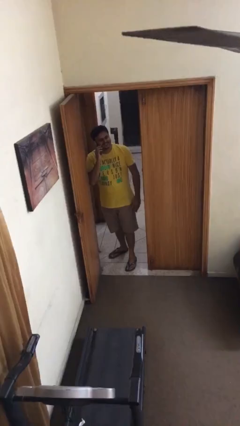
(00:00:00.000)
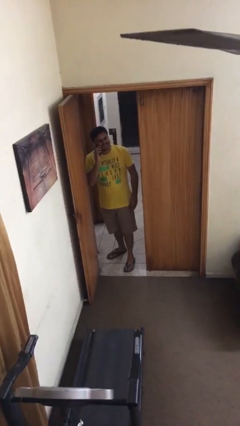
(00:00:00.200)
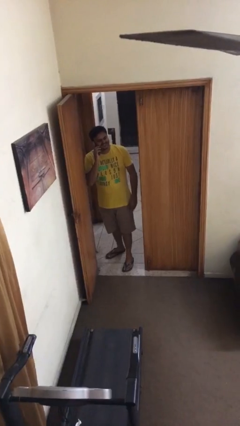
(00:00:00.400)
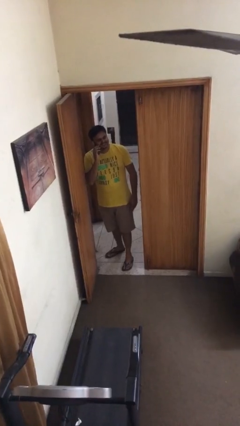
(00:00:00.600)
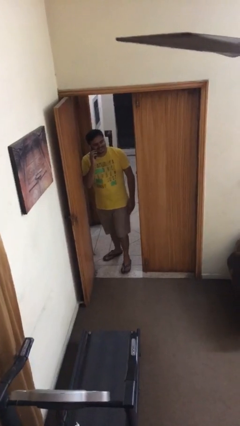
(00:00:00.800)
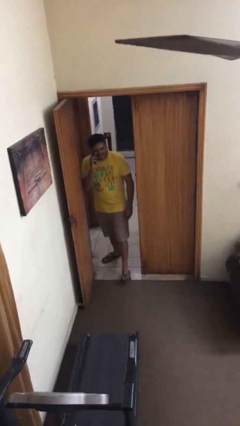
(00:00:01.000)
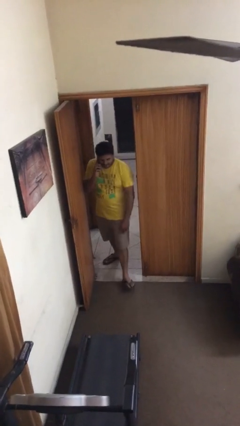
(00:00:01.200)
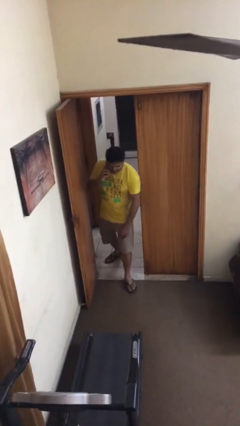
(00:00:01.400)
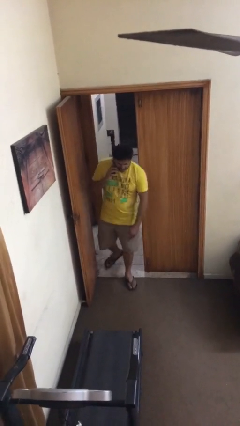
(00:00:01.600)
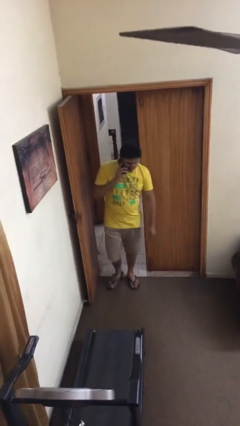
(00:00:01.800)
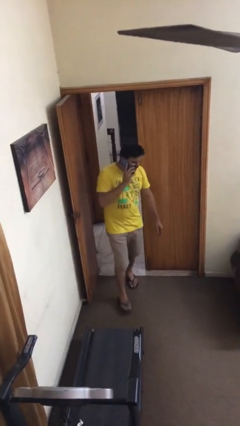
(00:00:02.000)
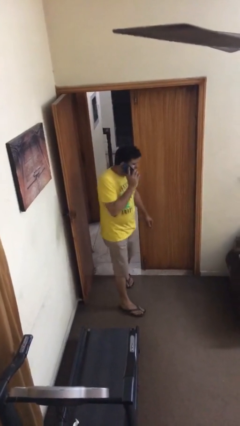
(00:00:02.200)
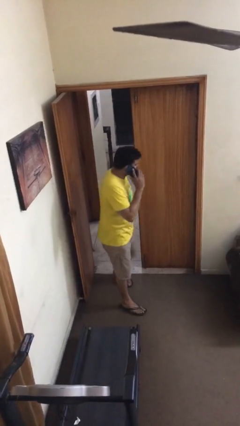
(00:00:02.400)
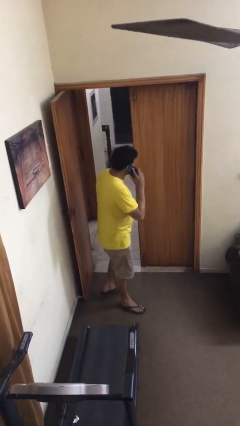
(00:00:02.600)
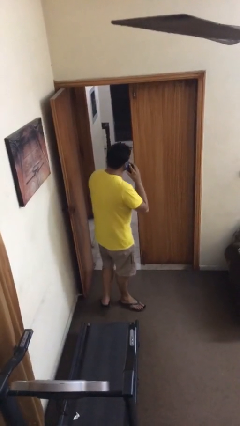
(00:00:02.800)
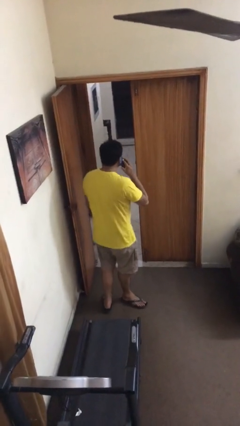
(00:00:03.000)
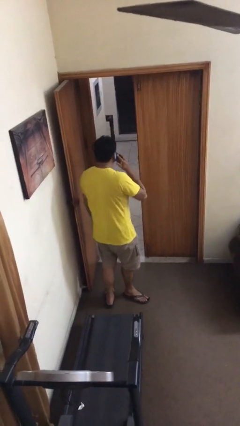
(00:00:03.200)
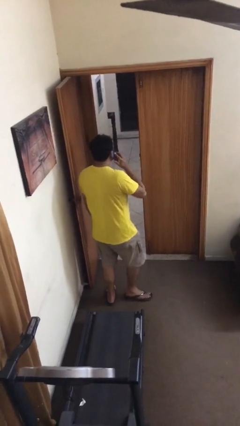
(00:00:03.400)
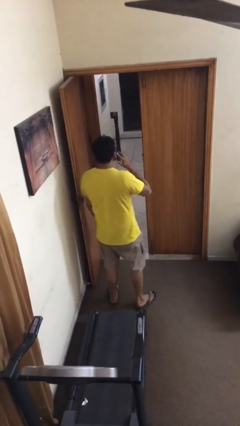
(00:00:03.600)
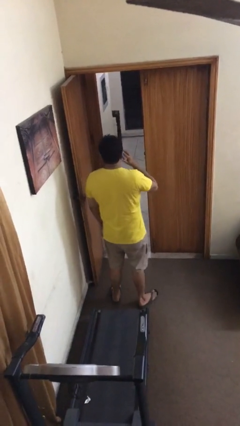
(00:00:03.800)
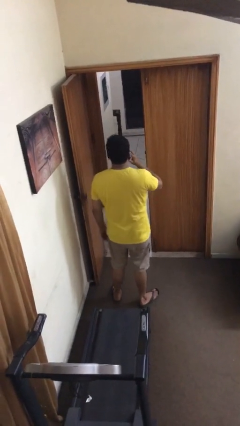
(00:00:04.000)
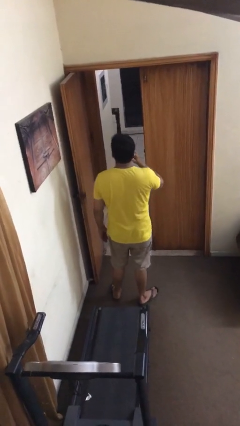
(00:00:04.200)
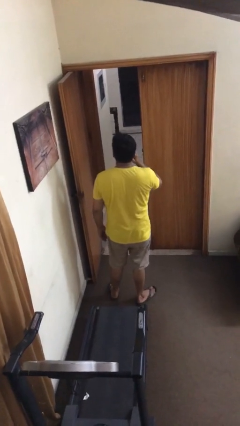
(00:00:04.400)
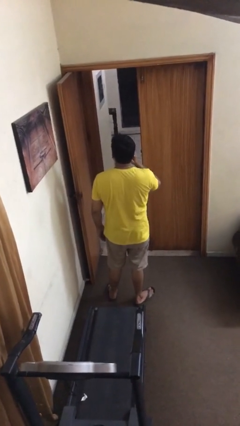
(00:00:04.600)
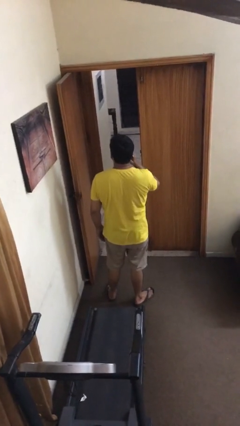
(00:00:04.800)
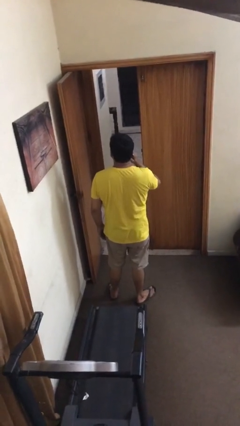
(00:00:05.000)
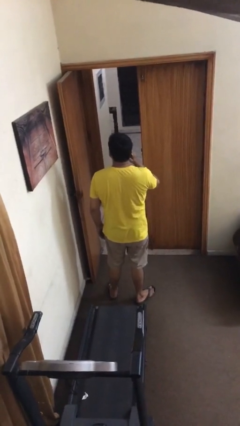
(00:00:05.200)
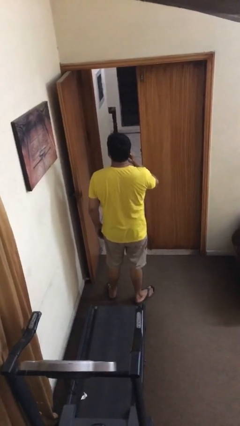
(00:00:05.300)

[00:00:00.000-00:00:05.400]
person enters scene through structure

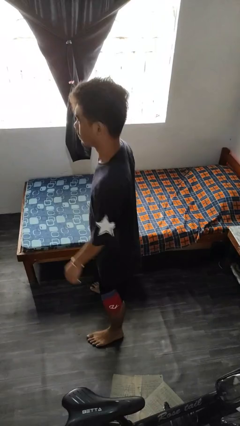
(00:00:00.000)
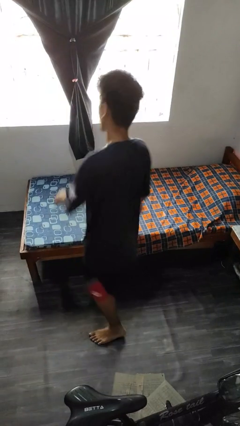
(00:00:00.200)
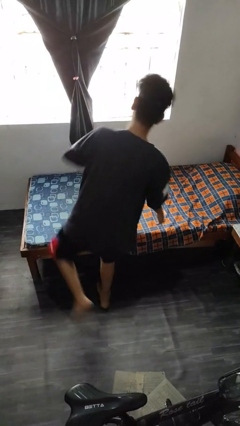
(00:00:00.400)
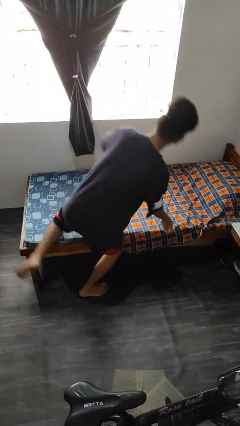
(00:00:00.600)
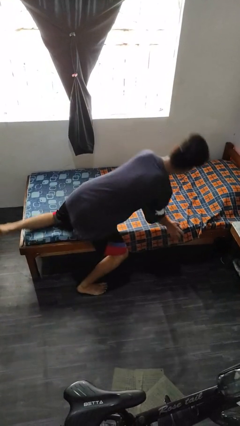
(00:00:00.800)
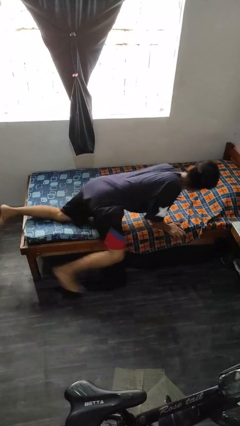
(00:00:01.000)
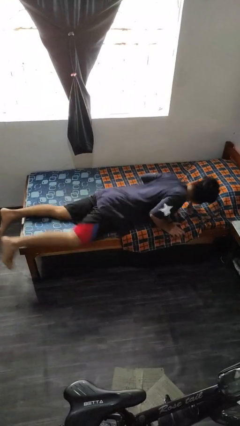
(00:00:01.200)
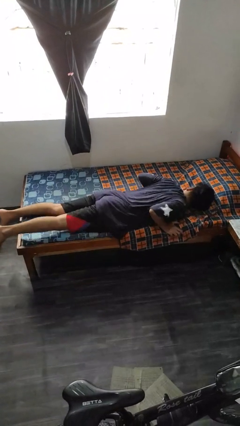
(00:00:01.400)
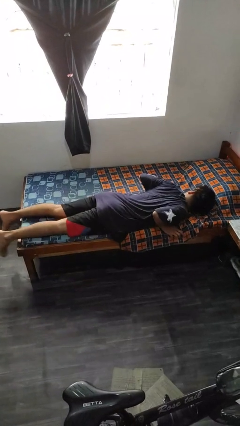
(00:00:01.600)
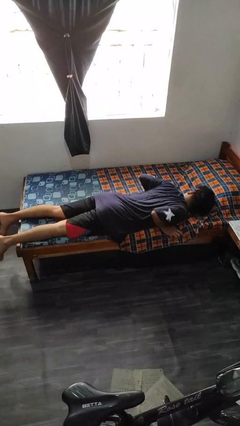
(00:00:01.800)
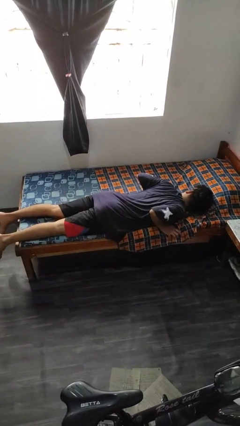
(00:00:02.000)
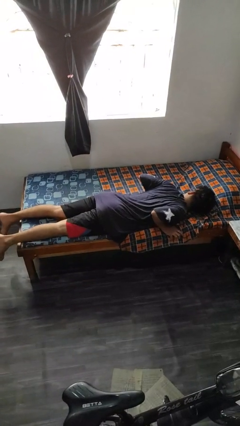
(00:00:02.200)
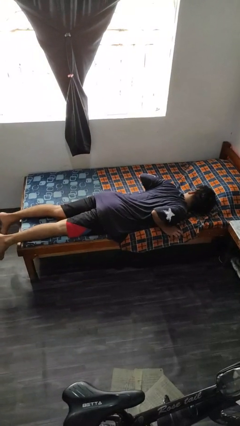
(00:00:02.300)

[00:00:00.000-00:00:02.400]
person lies down on bed

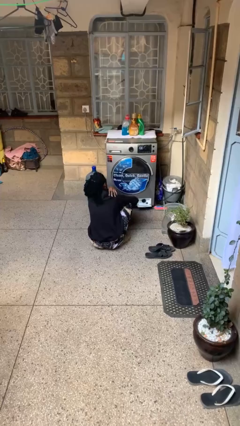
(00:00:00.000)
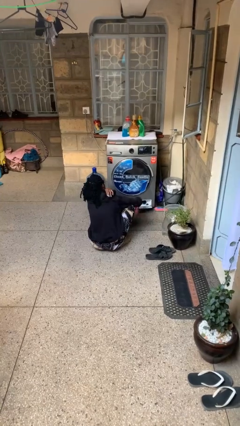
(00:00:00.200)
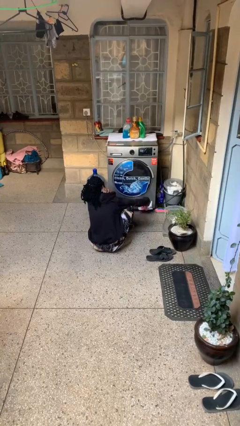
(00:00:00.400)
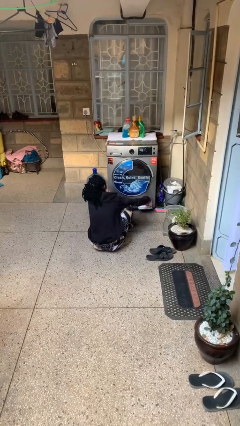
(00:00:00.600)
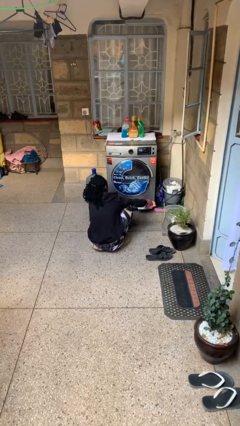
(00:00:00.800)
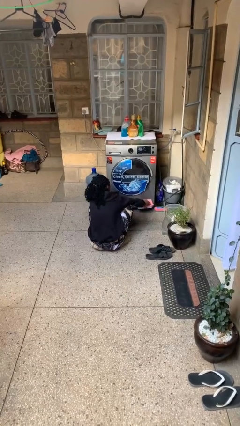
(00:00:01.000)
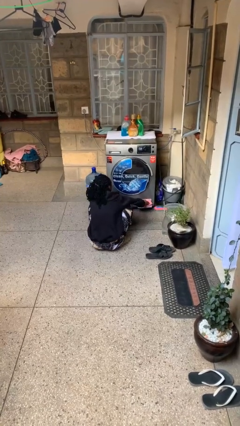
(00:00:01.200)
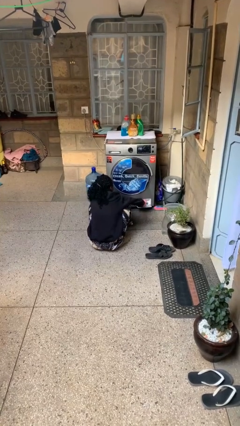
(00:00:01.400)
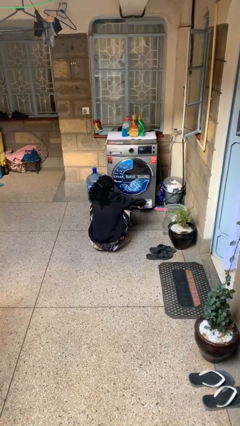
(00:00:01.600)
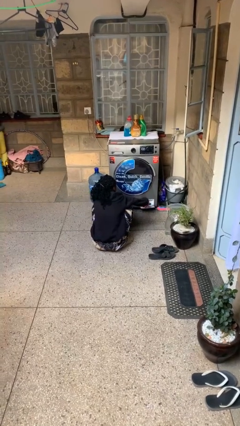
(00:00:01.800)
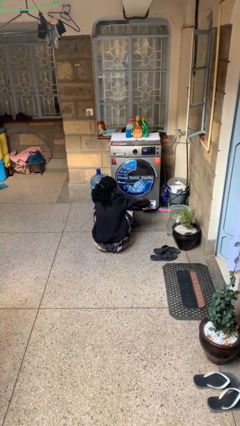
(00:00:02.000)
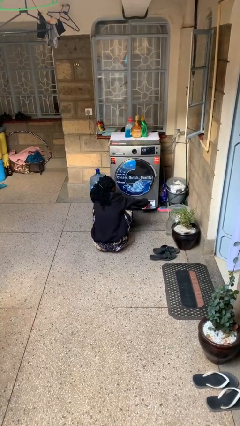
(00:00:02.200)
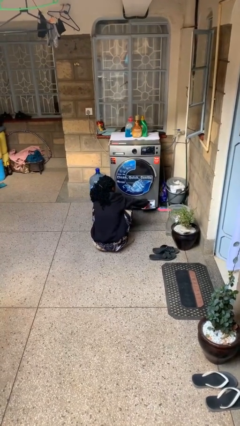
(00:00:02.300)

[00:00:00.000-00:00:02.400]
person cleans dryer lint trap

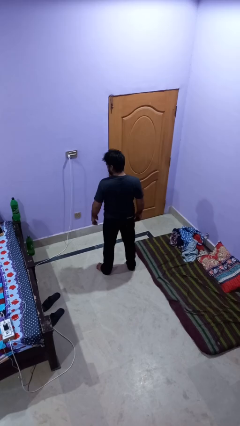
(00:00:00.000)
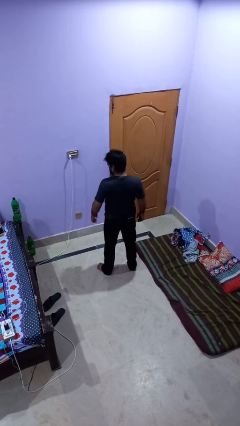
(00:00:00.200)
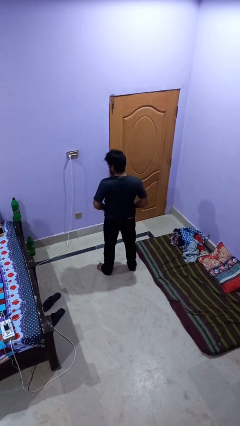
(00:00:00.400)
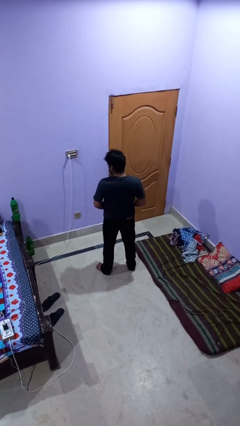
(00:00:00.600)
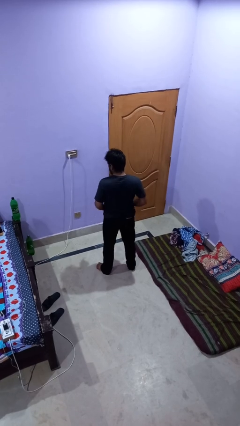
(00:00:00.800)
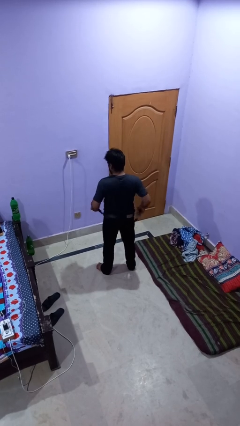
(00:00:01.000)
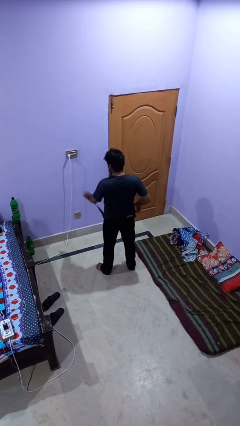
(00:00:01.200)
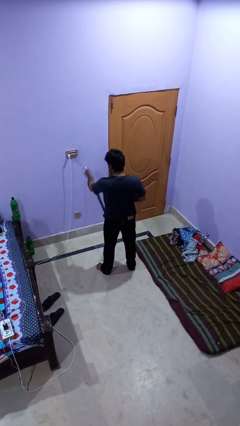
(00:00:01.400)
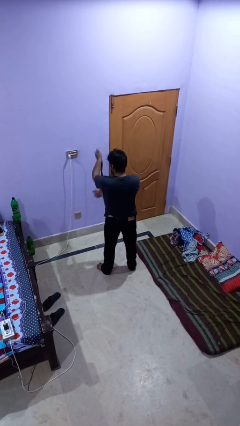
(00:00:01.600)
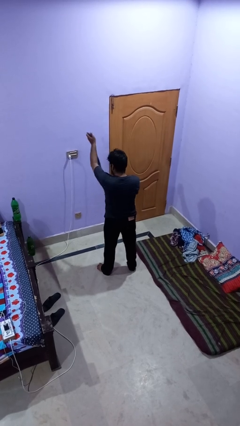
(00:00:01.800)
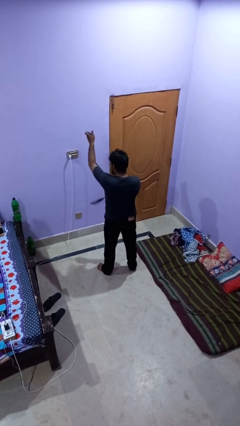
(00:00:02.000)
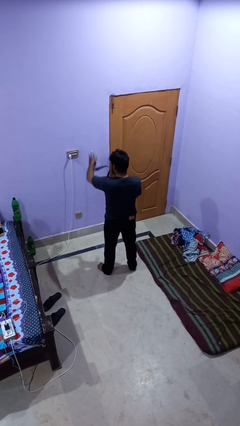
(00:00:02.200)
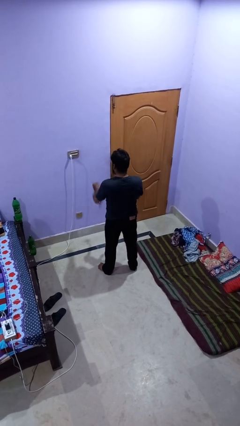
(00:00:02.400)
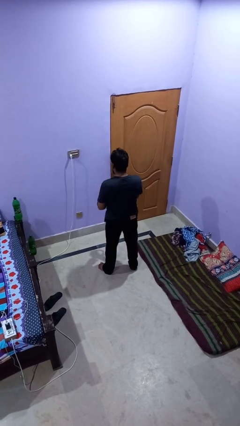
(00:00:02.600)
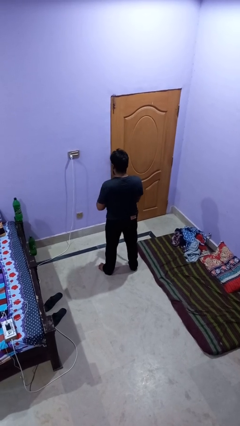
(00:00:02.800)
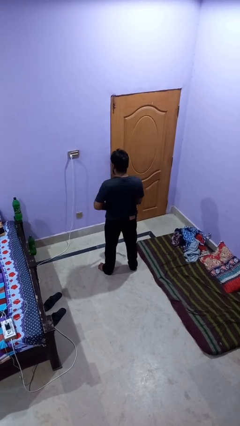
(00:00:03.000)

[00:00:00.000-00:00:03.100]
person takes off belt

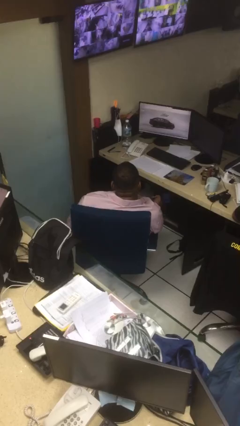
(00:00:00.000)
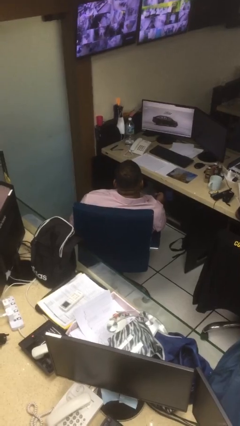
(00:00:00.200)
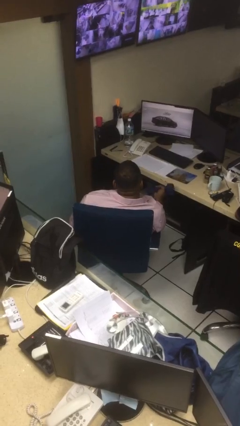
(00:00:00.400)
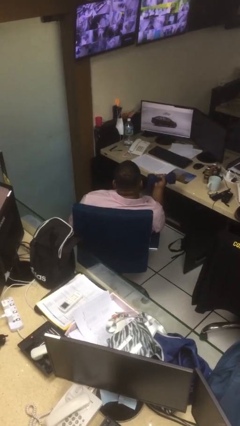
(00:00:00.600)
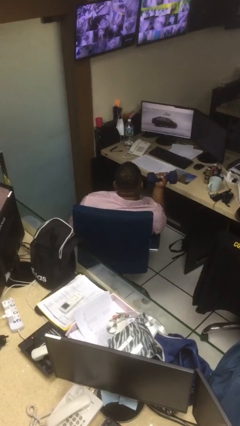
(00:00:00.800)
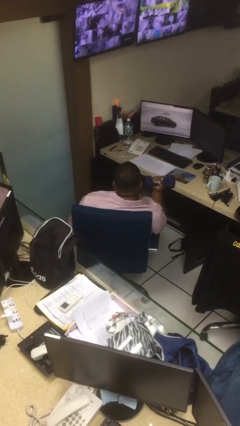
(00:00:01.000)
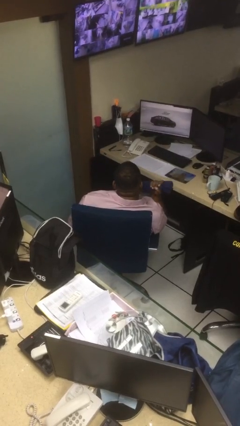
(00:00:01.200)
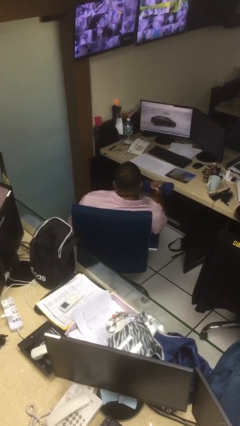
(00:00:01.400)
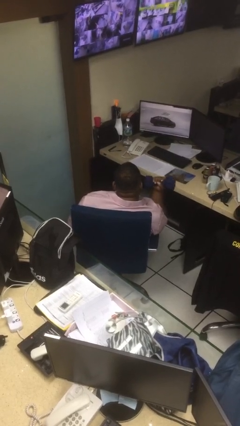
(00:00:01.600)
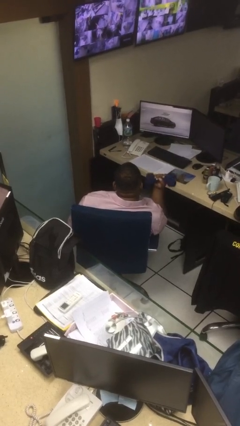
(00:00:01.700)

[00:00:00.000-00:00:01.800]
person lifts dumbbells

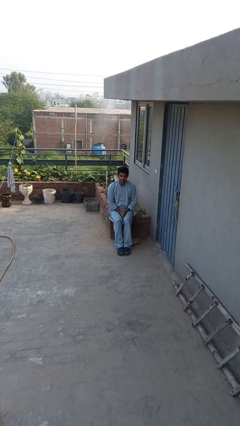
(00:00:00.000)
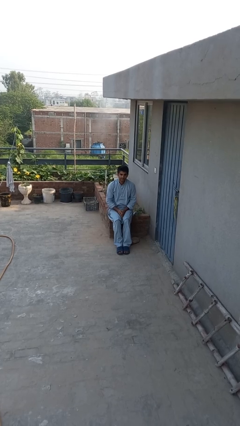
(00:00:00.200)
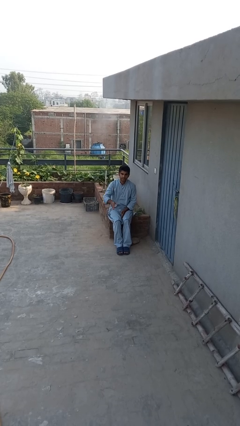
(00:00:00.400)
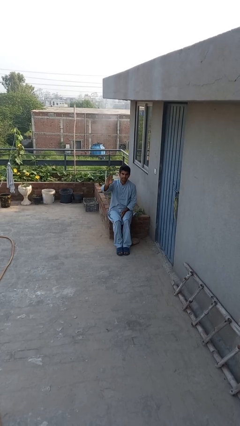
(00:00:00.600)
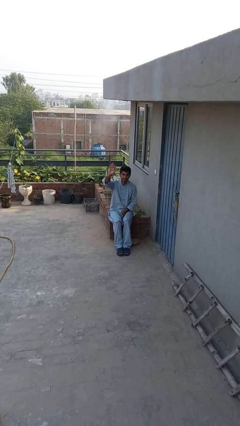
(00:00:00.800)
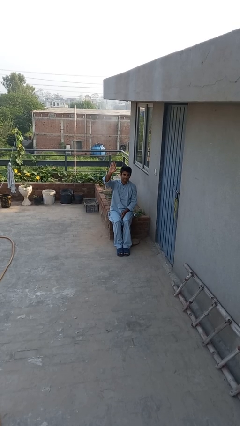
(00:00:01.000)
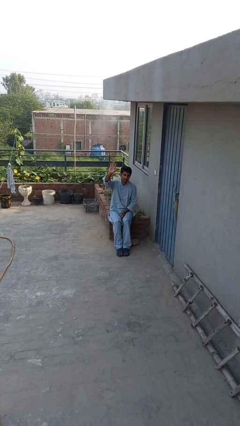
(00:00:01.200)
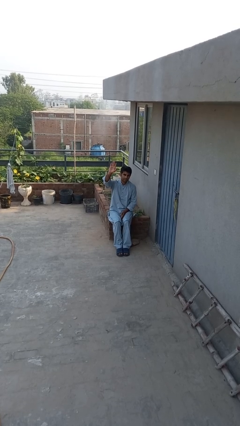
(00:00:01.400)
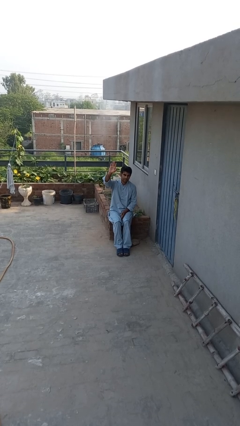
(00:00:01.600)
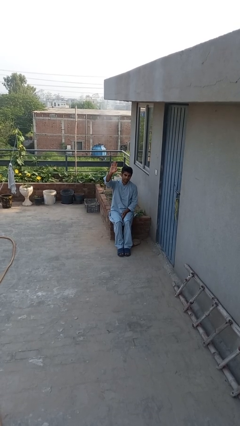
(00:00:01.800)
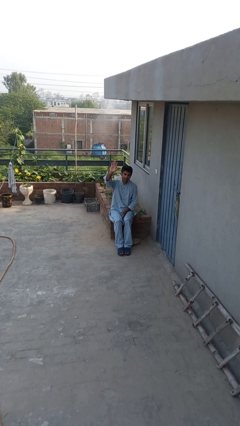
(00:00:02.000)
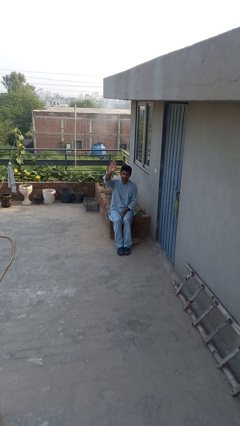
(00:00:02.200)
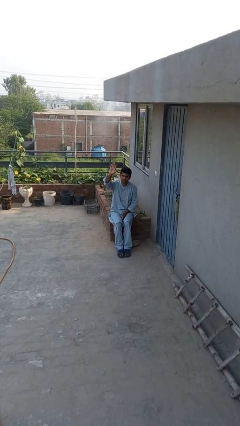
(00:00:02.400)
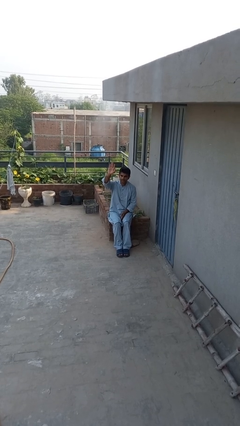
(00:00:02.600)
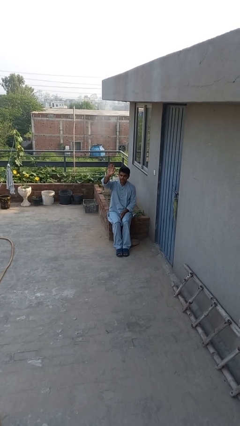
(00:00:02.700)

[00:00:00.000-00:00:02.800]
person gestures raise hand
